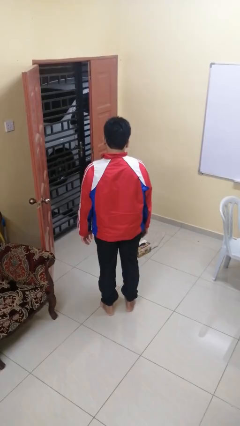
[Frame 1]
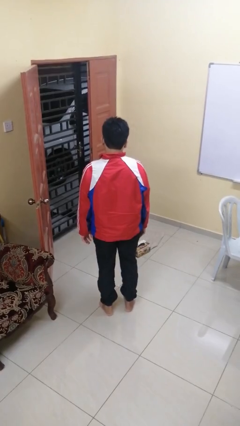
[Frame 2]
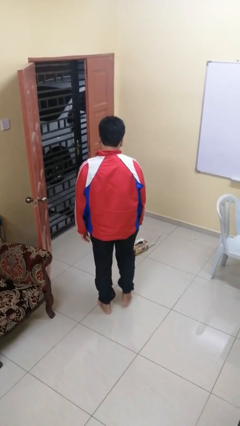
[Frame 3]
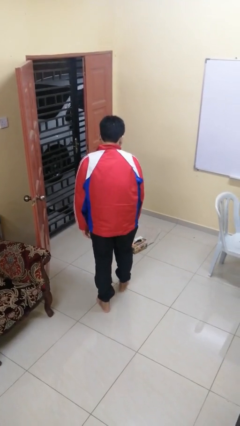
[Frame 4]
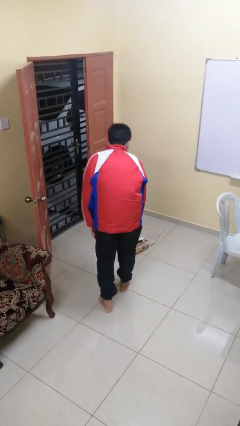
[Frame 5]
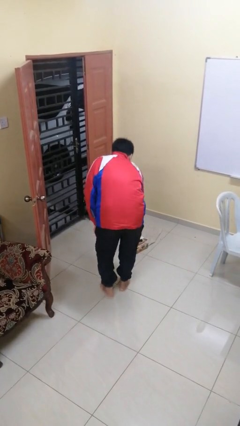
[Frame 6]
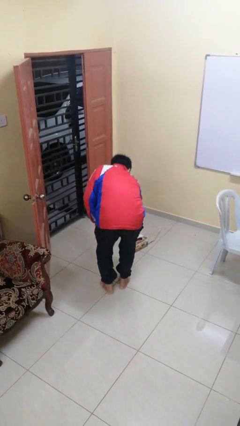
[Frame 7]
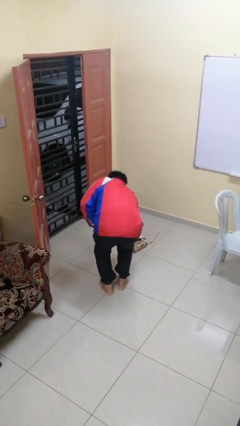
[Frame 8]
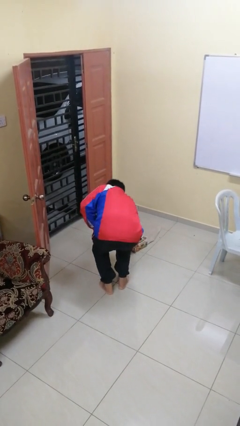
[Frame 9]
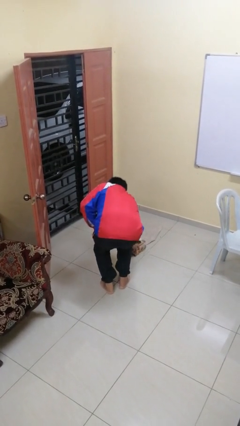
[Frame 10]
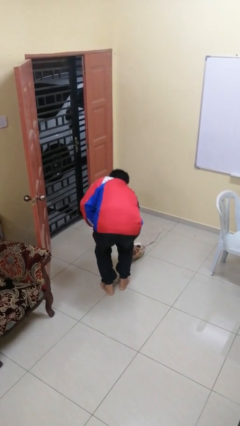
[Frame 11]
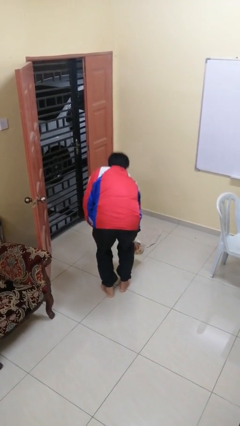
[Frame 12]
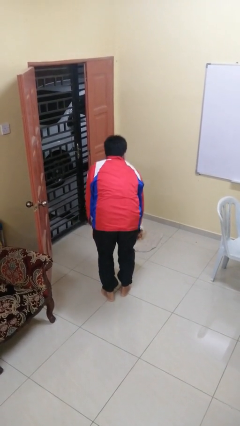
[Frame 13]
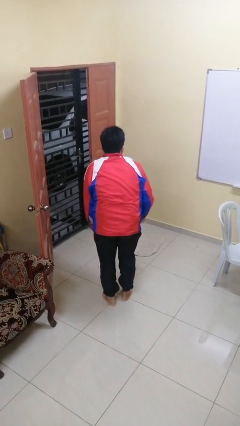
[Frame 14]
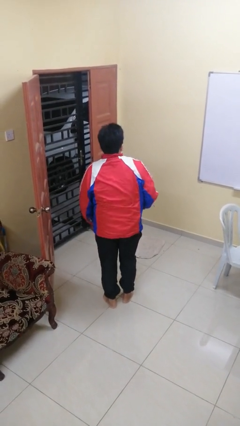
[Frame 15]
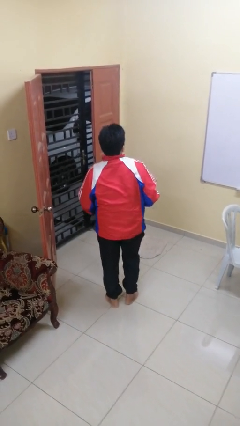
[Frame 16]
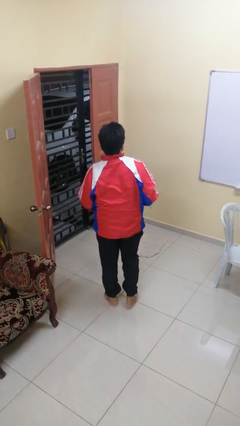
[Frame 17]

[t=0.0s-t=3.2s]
person picks up object from floor

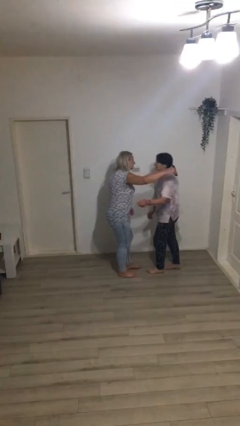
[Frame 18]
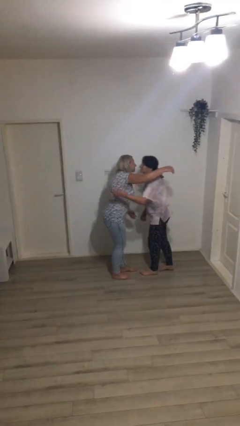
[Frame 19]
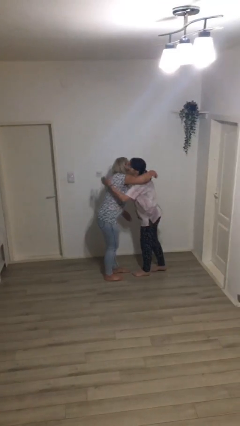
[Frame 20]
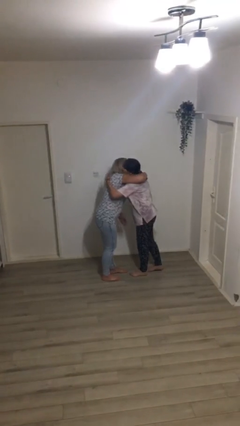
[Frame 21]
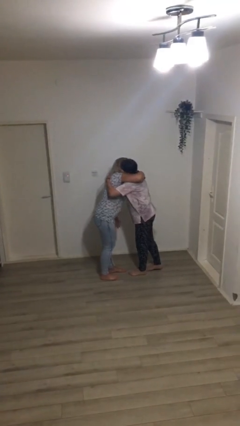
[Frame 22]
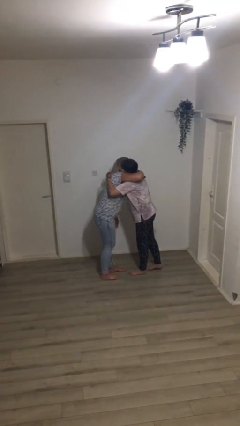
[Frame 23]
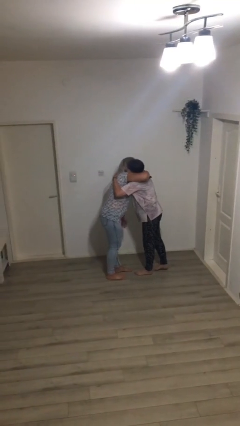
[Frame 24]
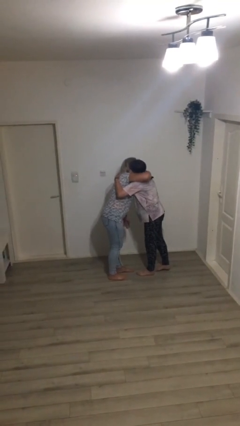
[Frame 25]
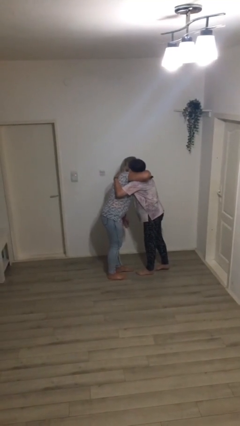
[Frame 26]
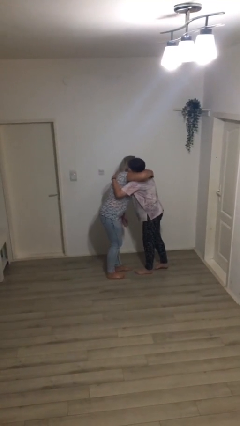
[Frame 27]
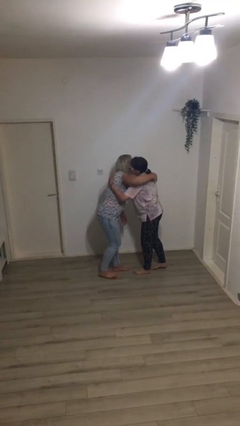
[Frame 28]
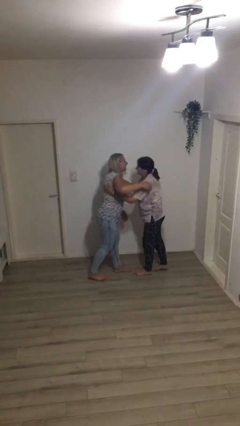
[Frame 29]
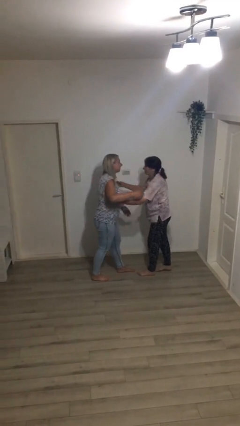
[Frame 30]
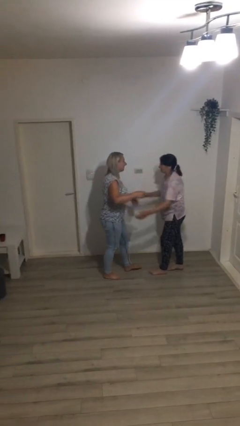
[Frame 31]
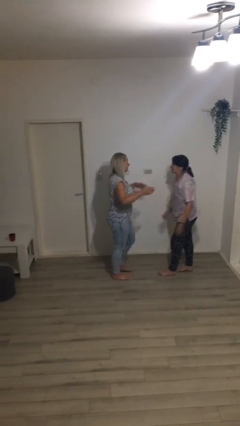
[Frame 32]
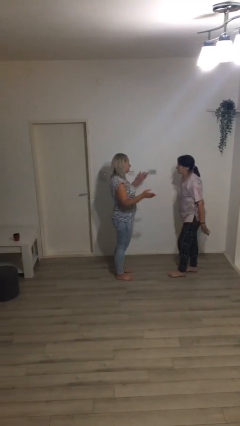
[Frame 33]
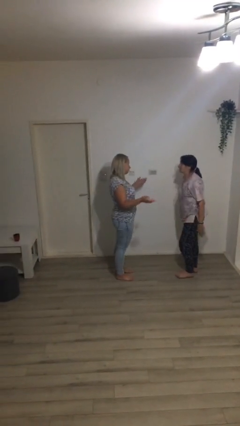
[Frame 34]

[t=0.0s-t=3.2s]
person embraces person

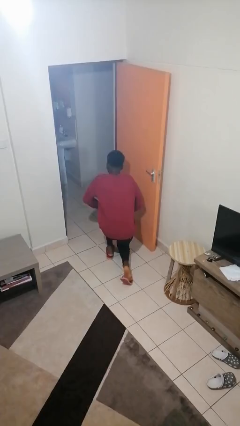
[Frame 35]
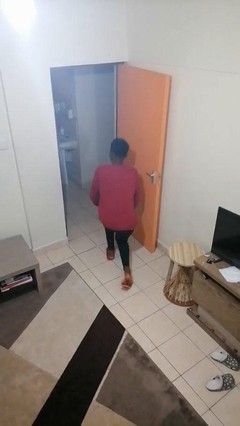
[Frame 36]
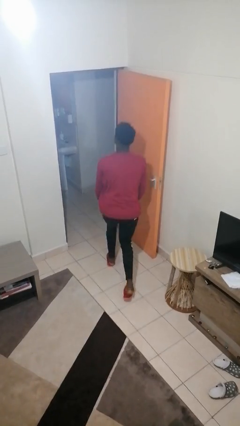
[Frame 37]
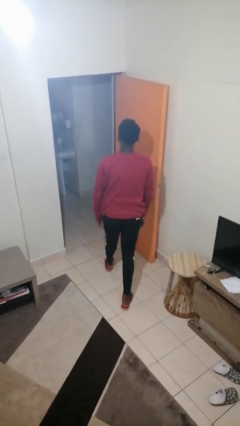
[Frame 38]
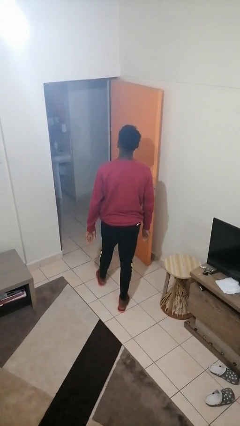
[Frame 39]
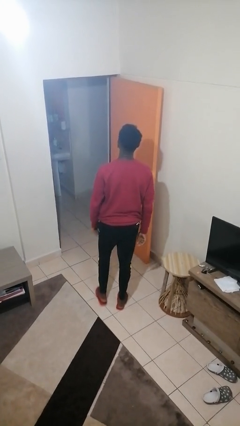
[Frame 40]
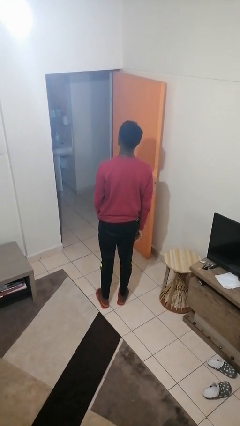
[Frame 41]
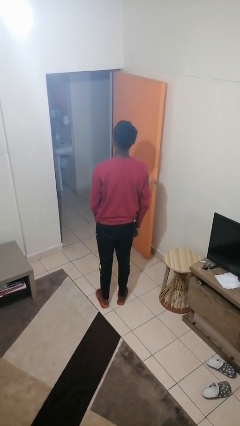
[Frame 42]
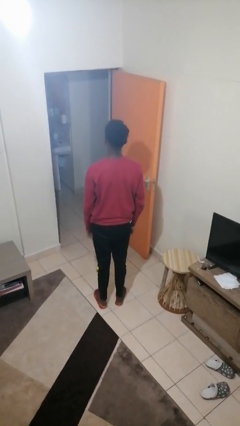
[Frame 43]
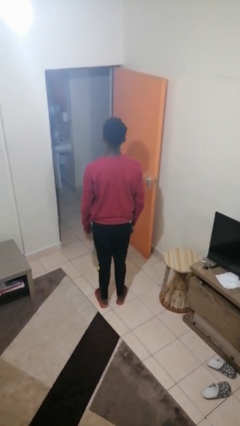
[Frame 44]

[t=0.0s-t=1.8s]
person stands up from floor

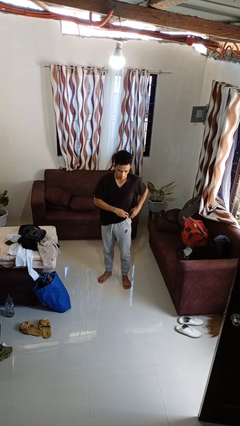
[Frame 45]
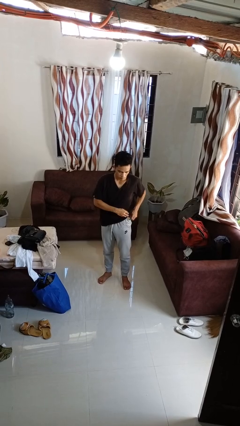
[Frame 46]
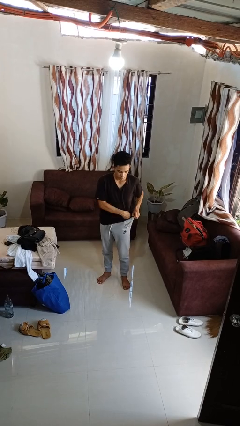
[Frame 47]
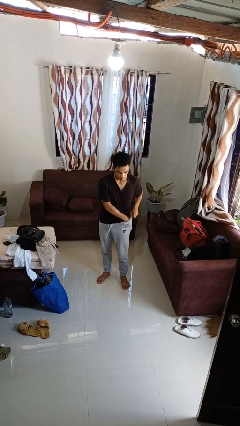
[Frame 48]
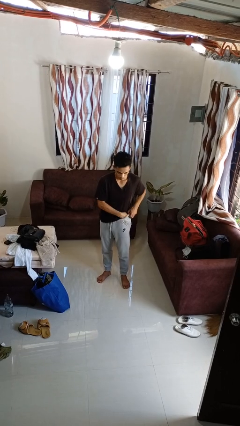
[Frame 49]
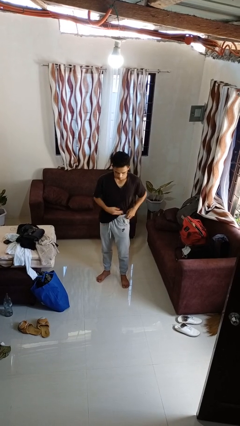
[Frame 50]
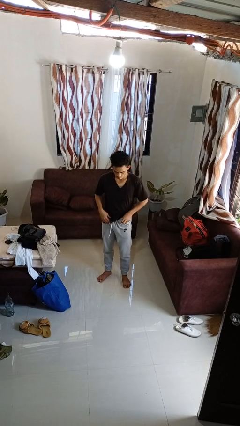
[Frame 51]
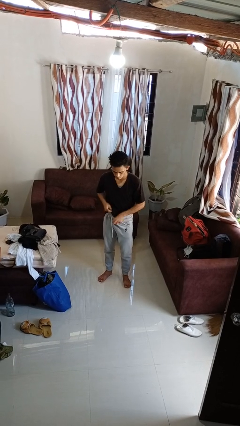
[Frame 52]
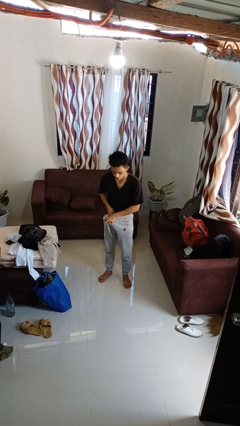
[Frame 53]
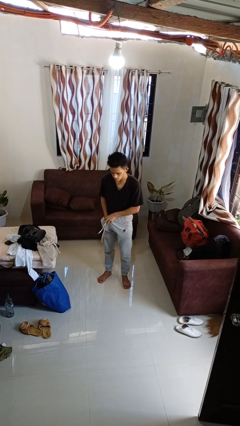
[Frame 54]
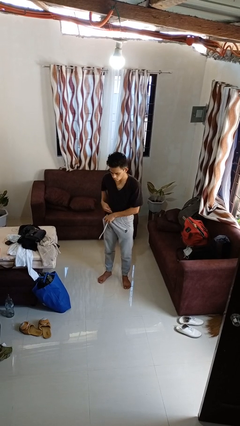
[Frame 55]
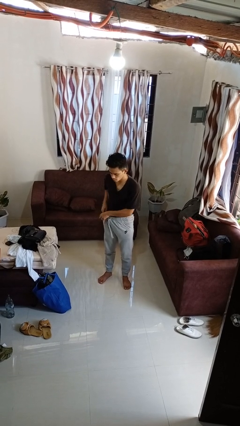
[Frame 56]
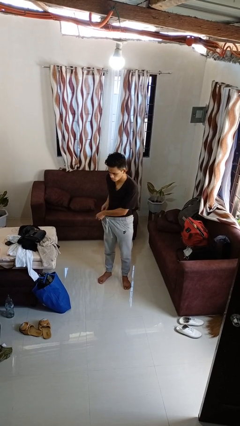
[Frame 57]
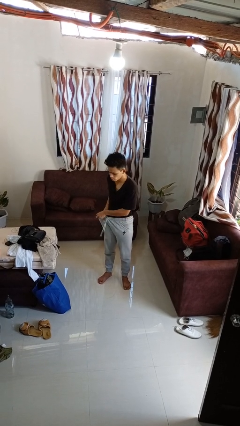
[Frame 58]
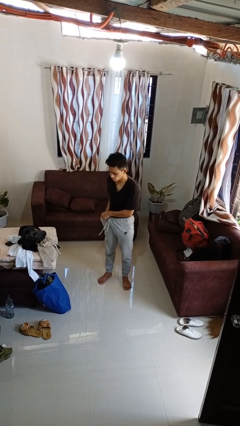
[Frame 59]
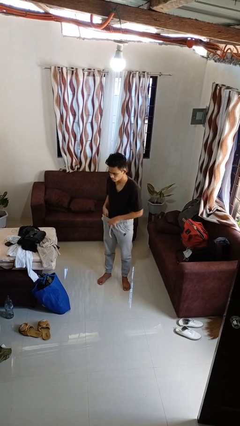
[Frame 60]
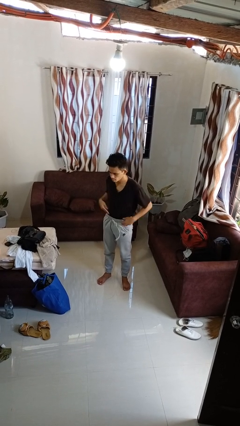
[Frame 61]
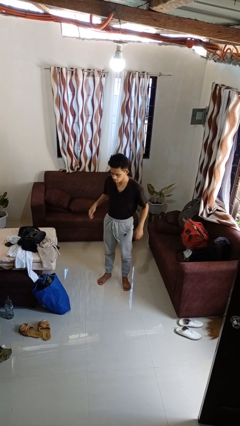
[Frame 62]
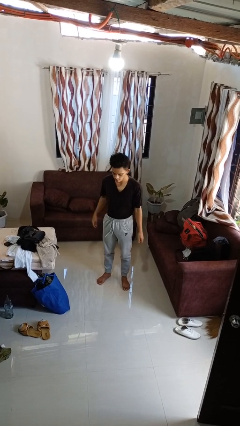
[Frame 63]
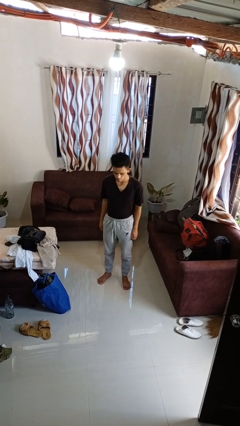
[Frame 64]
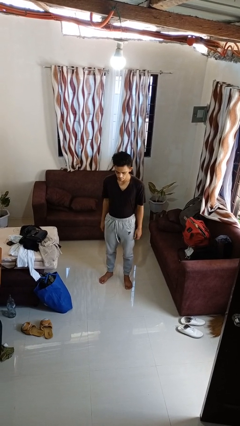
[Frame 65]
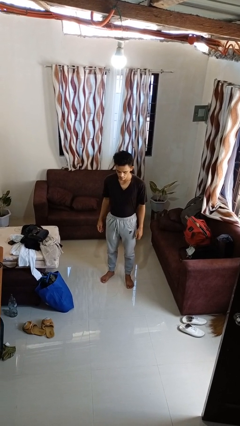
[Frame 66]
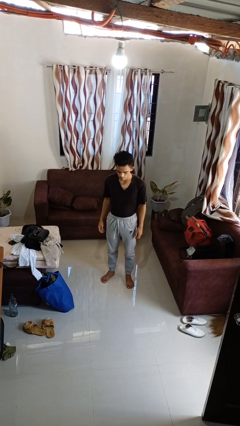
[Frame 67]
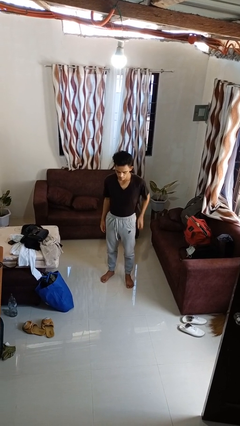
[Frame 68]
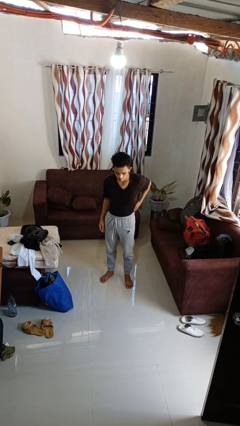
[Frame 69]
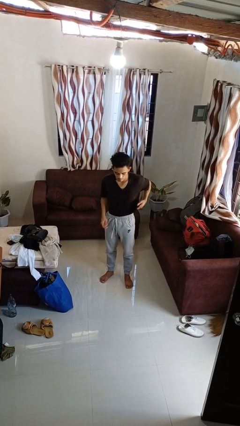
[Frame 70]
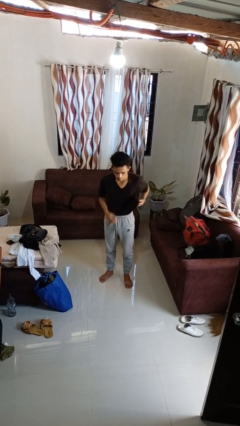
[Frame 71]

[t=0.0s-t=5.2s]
person tucks in shirt

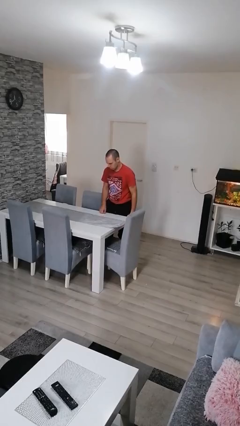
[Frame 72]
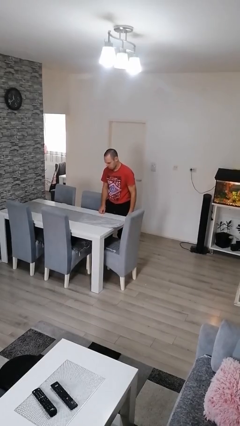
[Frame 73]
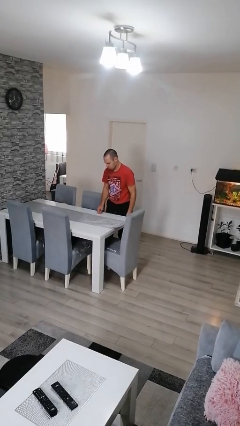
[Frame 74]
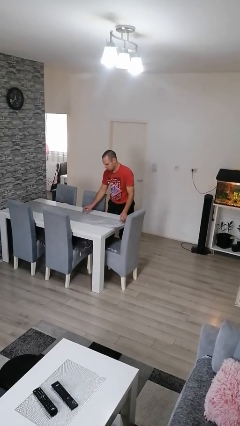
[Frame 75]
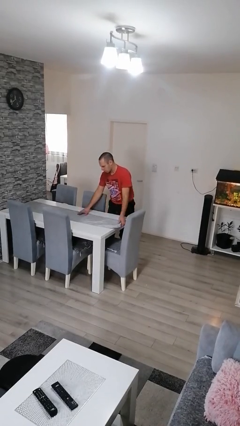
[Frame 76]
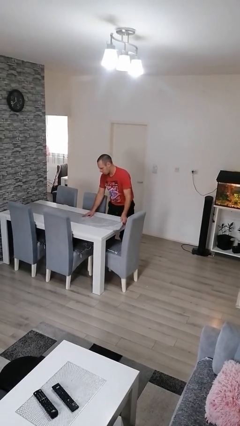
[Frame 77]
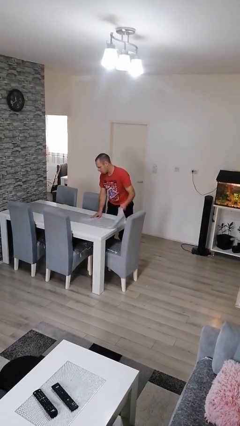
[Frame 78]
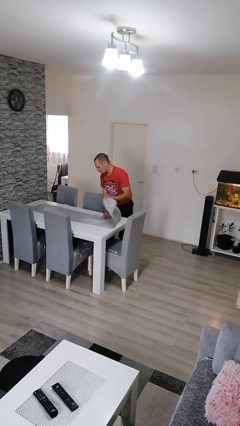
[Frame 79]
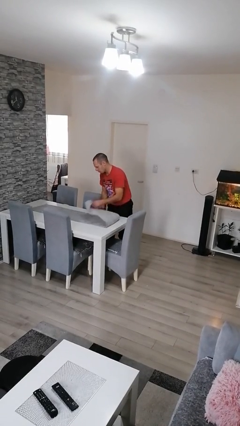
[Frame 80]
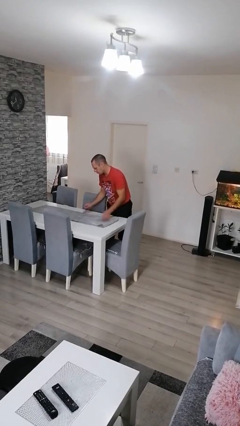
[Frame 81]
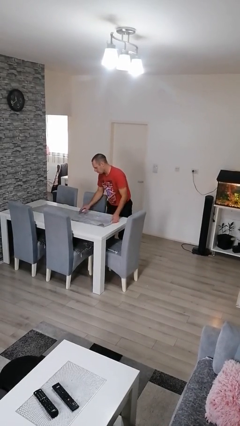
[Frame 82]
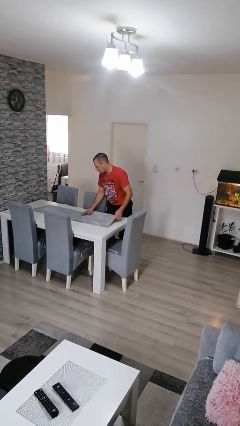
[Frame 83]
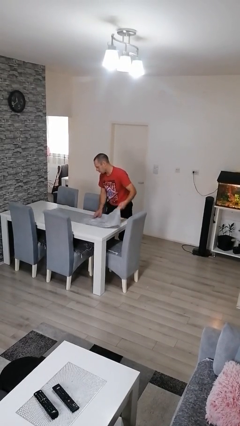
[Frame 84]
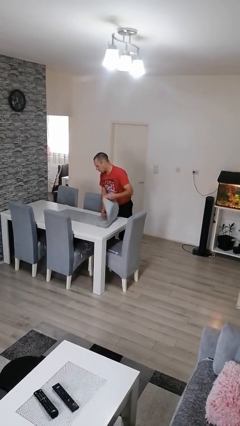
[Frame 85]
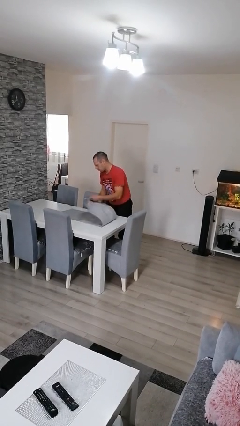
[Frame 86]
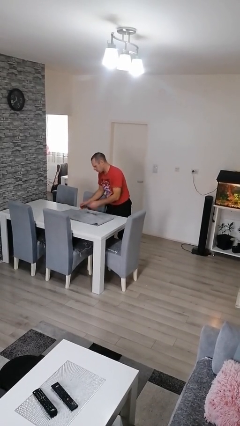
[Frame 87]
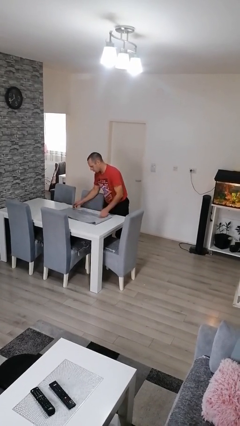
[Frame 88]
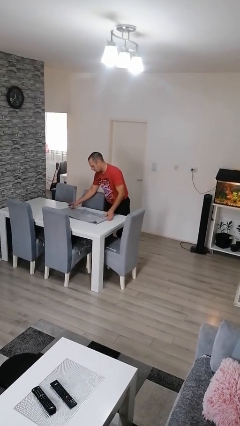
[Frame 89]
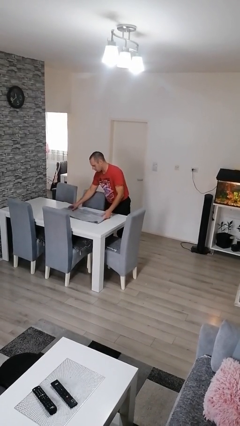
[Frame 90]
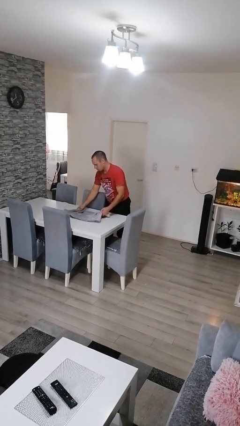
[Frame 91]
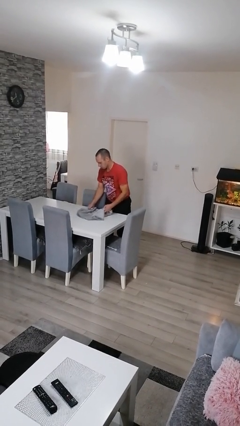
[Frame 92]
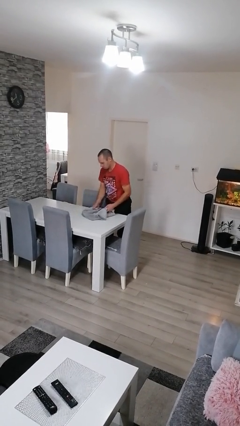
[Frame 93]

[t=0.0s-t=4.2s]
person folds tablecloth

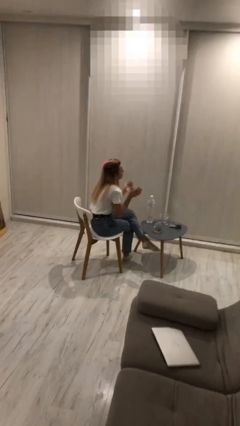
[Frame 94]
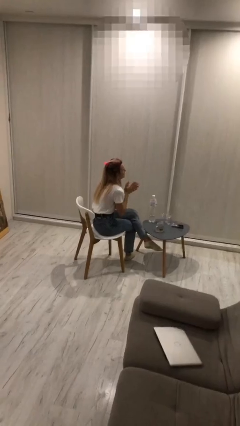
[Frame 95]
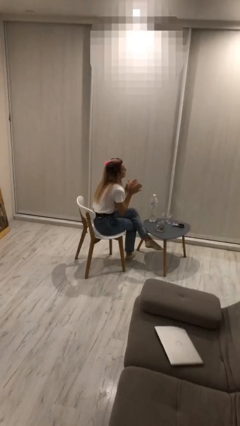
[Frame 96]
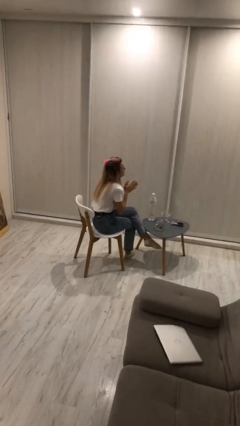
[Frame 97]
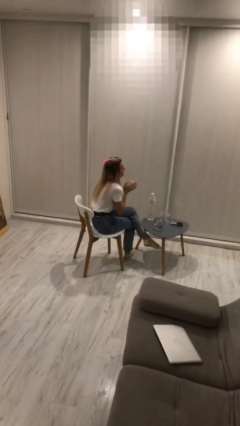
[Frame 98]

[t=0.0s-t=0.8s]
person claps hands
